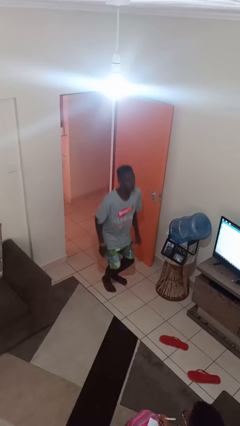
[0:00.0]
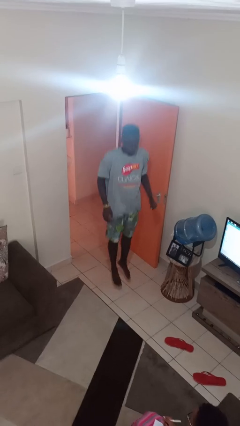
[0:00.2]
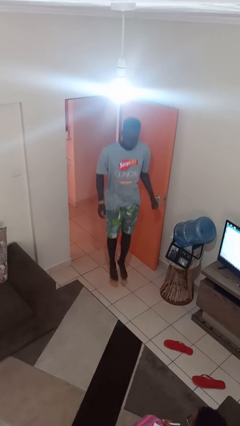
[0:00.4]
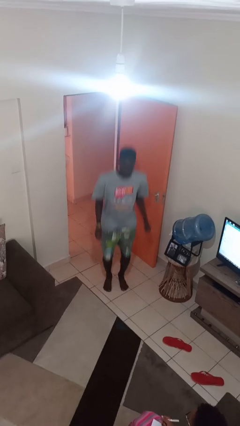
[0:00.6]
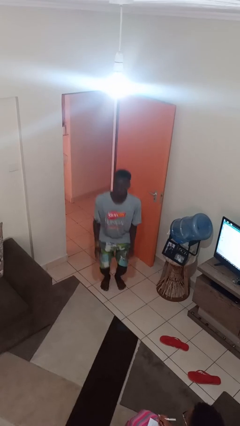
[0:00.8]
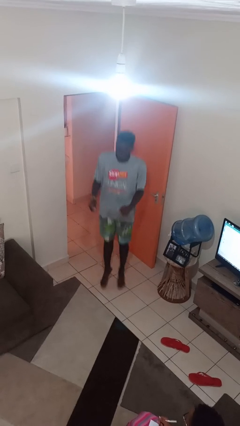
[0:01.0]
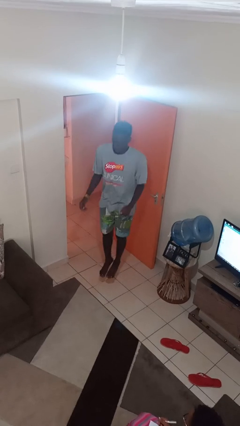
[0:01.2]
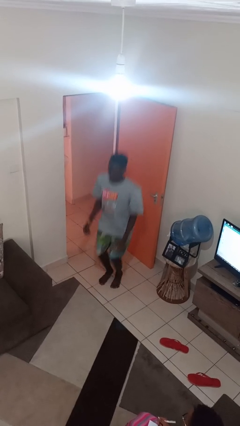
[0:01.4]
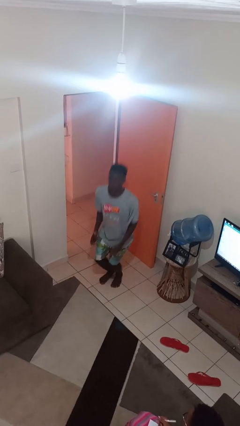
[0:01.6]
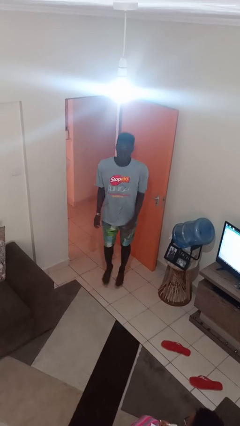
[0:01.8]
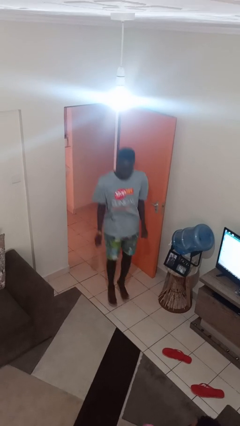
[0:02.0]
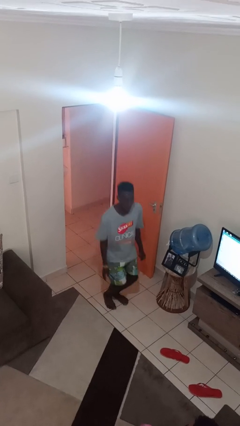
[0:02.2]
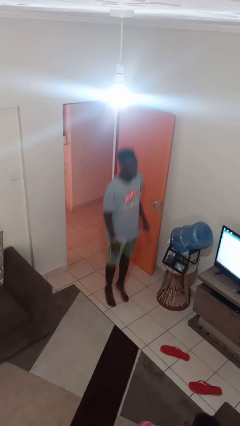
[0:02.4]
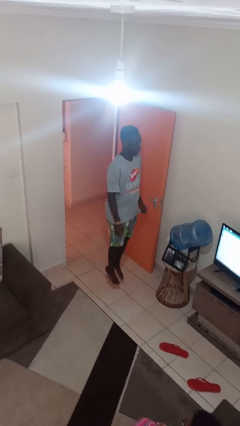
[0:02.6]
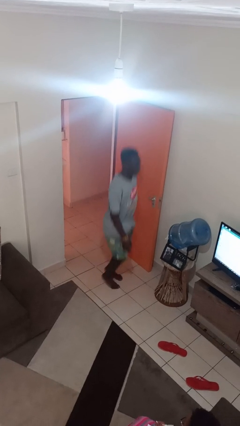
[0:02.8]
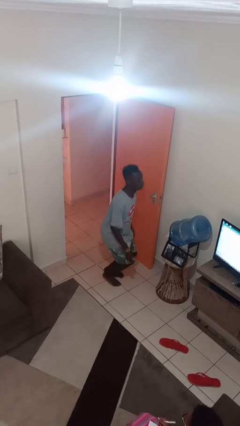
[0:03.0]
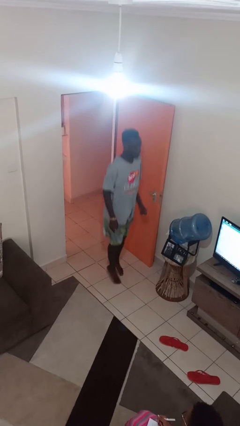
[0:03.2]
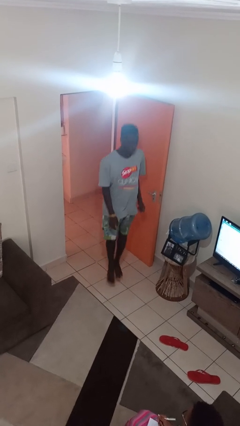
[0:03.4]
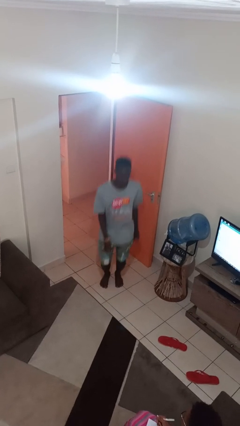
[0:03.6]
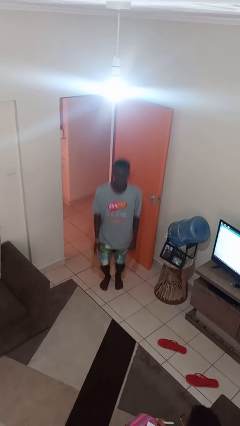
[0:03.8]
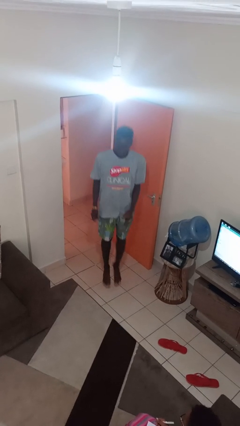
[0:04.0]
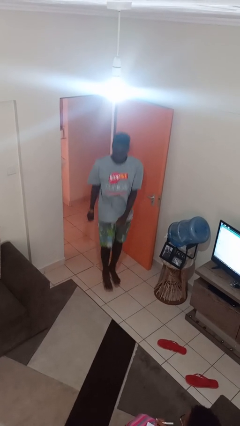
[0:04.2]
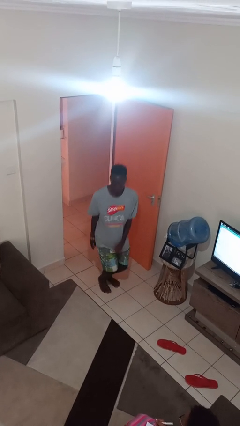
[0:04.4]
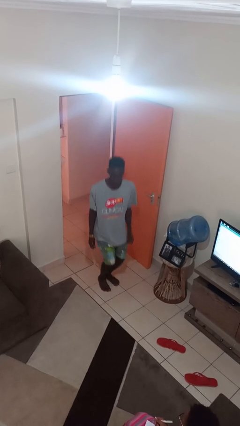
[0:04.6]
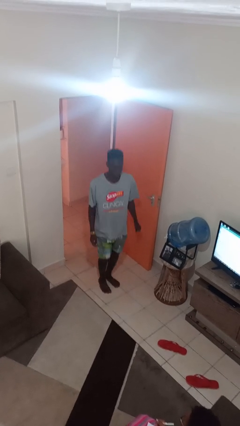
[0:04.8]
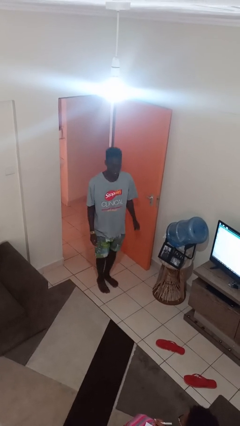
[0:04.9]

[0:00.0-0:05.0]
person jumps

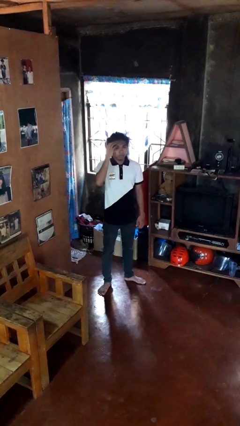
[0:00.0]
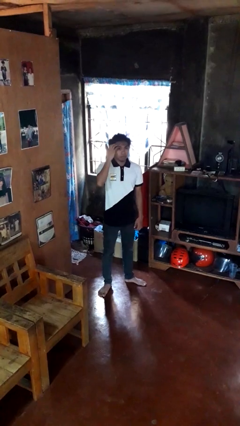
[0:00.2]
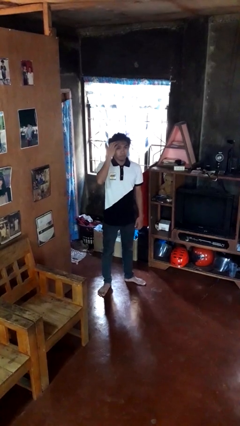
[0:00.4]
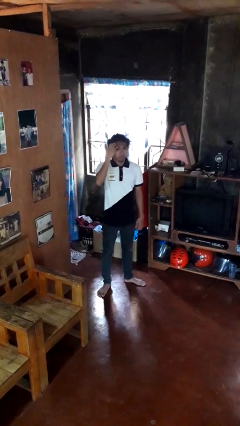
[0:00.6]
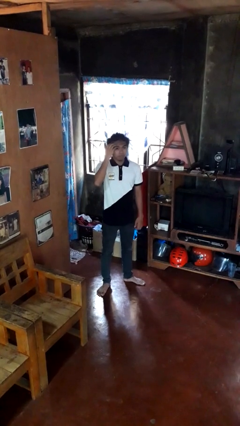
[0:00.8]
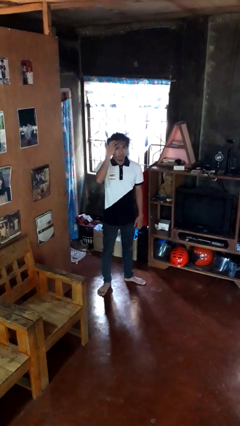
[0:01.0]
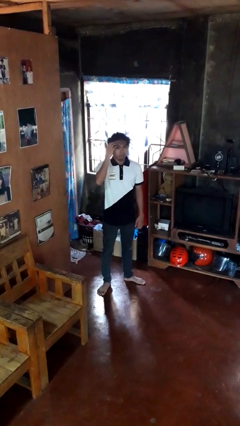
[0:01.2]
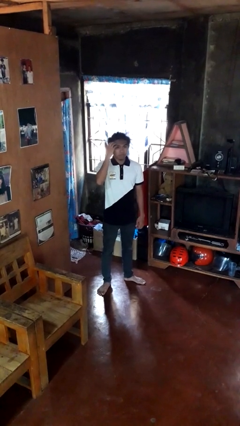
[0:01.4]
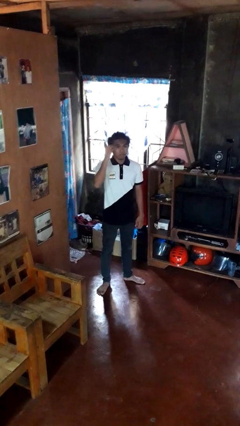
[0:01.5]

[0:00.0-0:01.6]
person scratches face

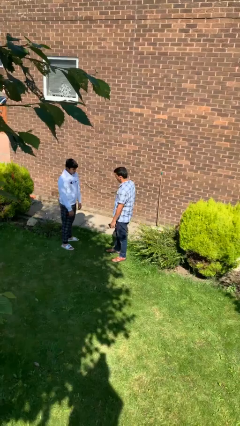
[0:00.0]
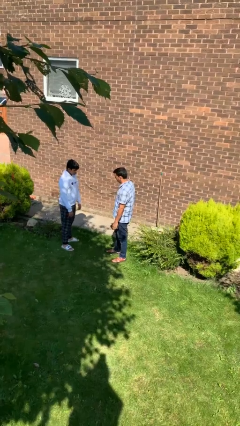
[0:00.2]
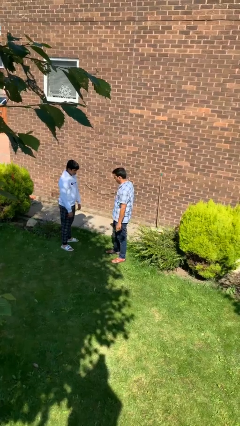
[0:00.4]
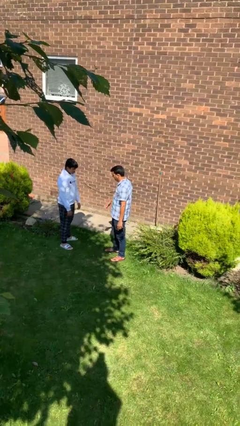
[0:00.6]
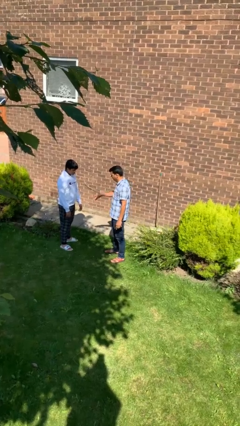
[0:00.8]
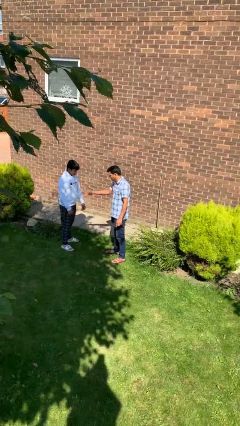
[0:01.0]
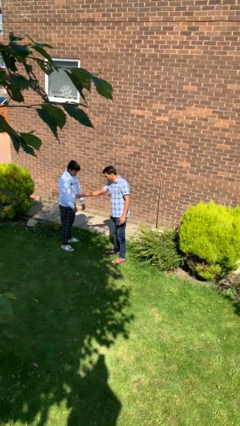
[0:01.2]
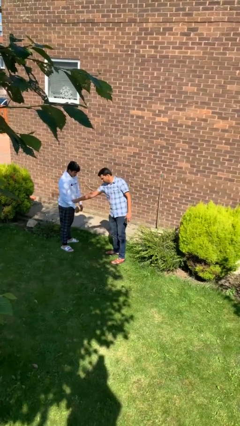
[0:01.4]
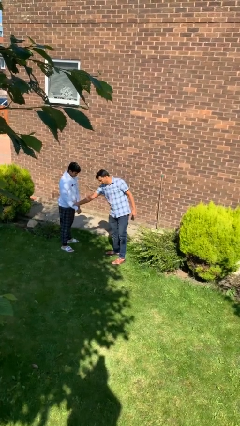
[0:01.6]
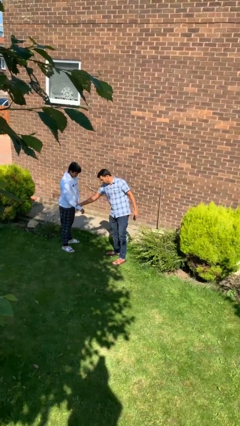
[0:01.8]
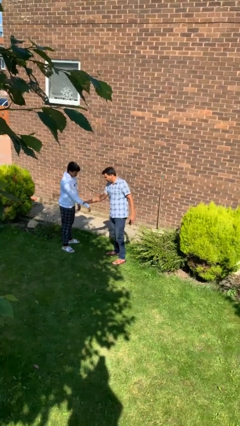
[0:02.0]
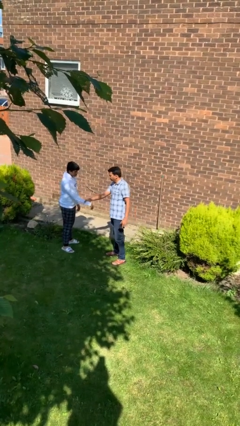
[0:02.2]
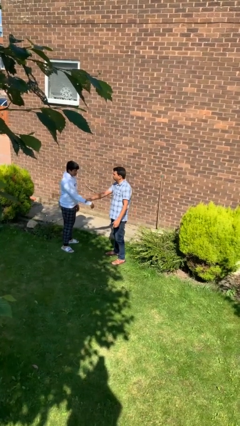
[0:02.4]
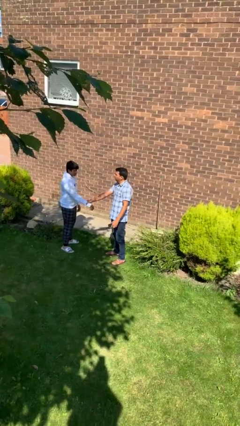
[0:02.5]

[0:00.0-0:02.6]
person grabs person by forearm

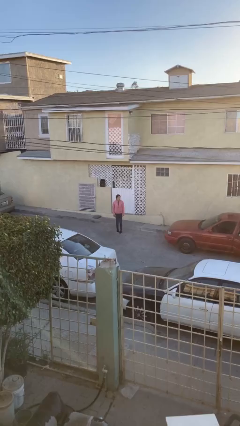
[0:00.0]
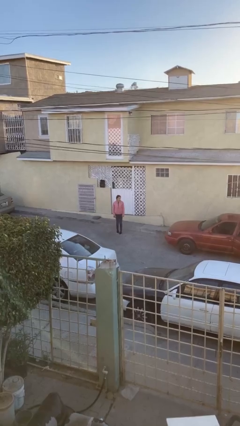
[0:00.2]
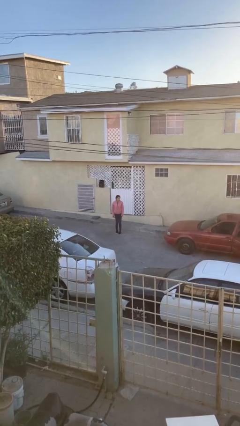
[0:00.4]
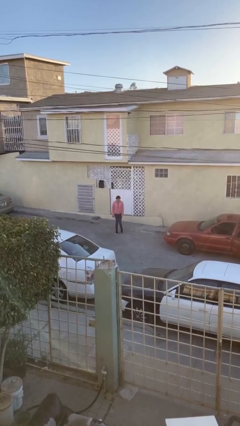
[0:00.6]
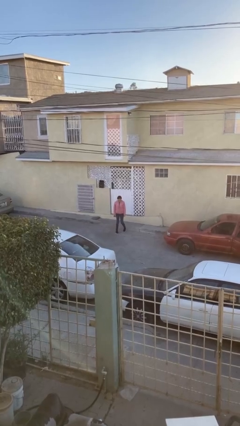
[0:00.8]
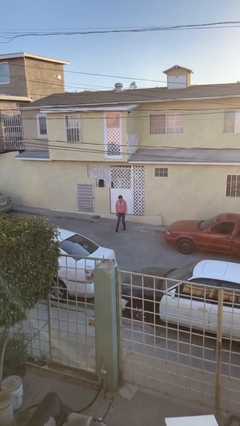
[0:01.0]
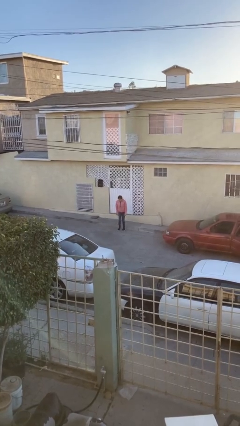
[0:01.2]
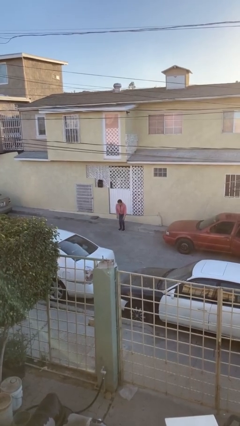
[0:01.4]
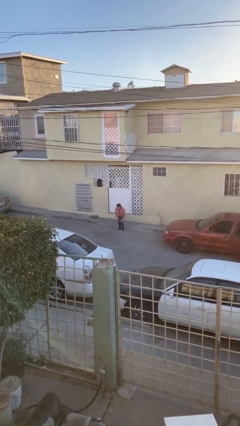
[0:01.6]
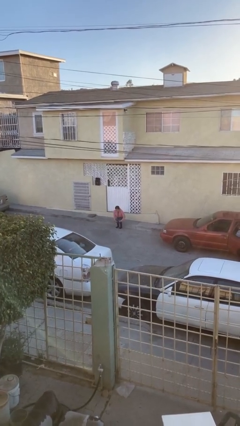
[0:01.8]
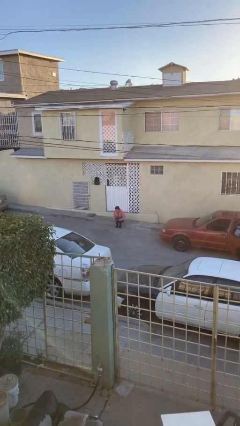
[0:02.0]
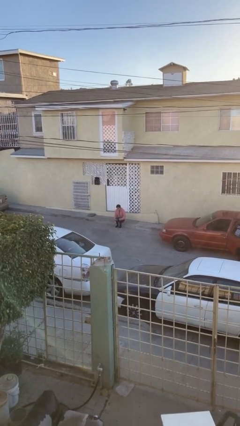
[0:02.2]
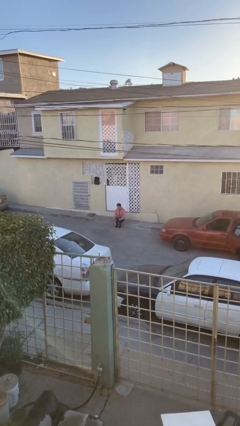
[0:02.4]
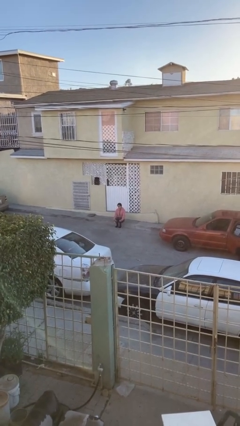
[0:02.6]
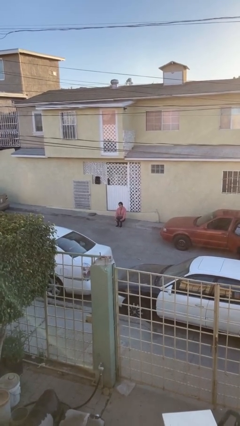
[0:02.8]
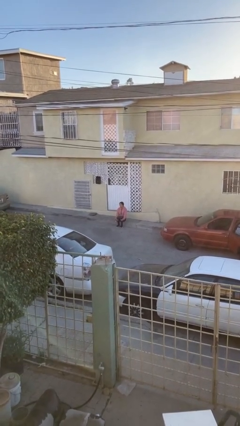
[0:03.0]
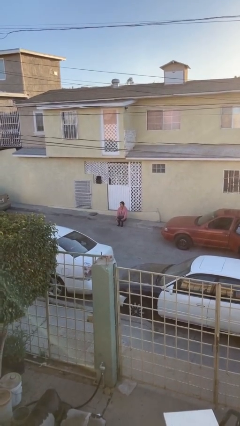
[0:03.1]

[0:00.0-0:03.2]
person sits down

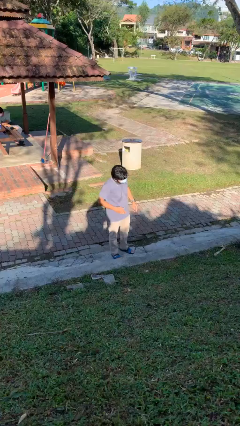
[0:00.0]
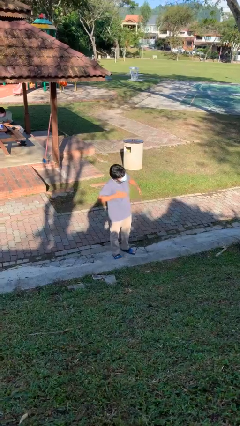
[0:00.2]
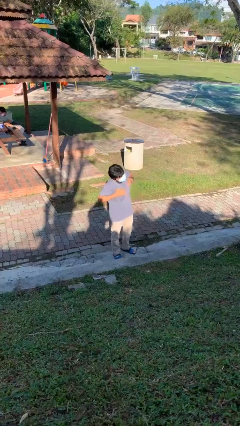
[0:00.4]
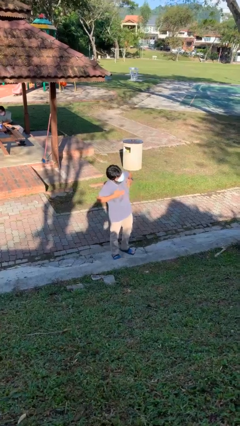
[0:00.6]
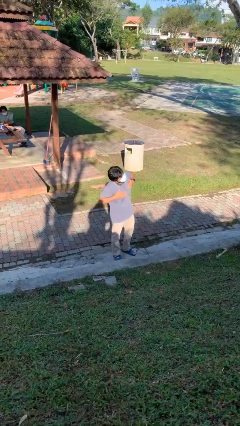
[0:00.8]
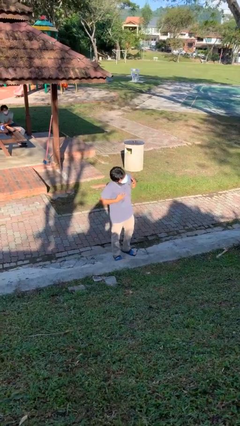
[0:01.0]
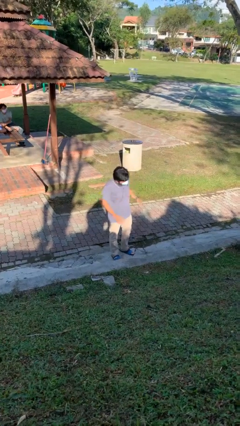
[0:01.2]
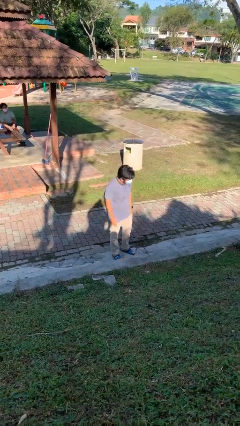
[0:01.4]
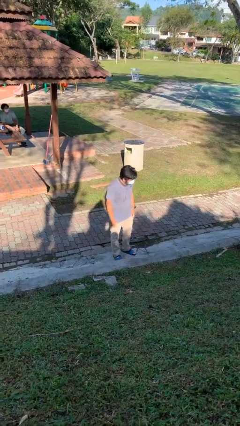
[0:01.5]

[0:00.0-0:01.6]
person drums on chest

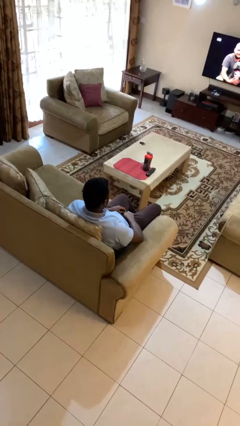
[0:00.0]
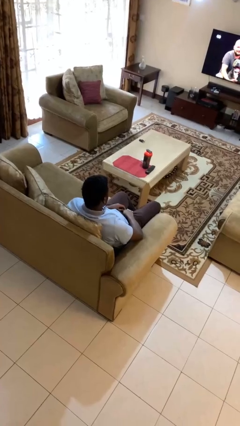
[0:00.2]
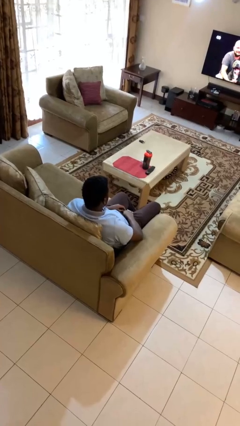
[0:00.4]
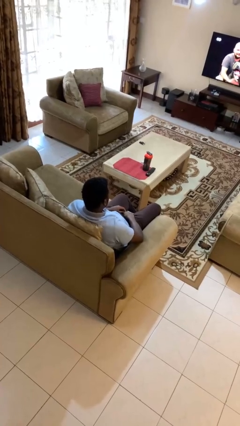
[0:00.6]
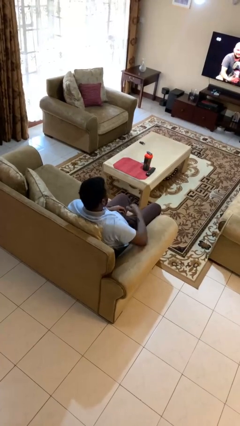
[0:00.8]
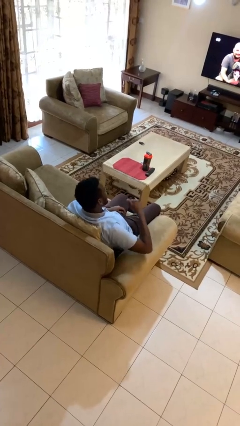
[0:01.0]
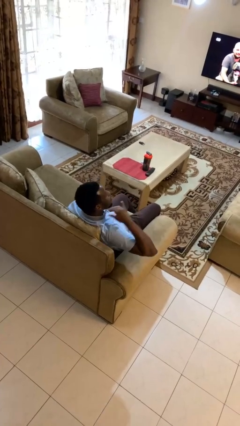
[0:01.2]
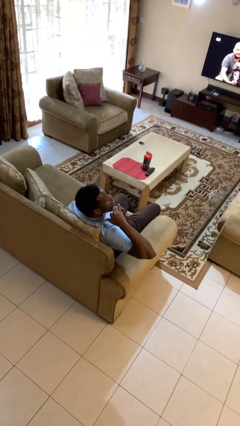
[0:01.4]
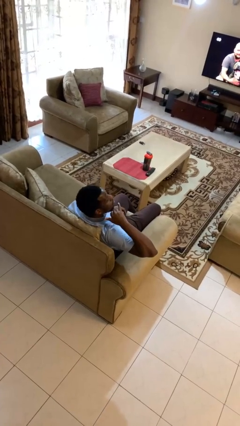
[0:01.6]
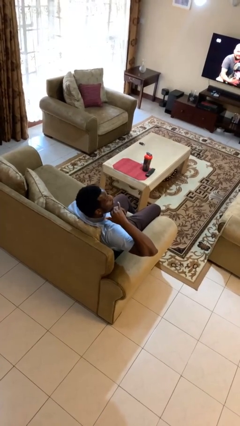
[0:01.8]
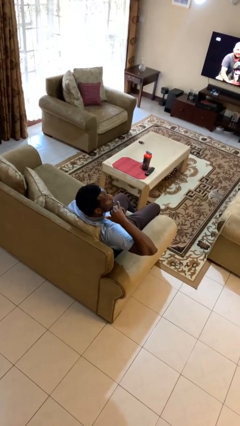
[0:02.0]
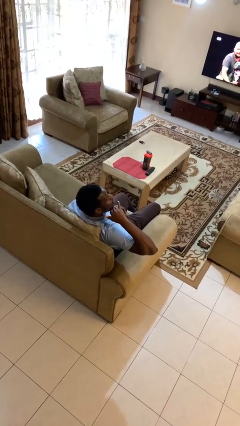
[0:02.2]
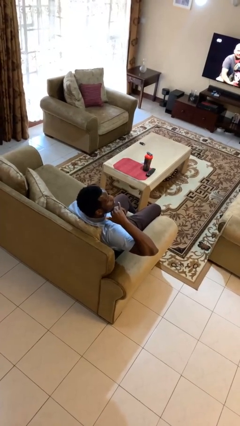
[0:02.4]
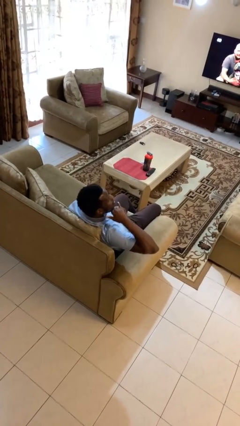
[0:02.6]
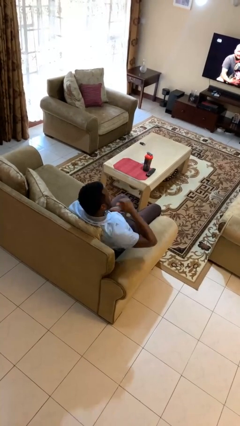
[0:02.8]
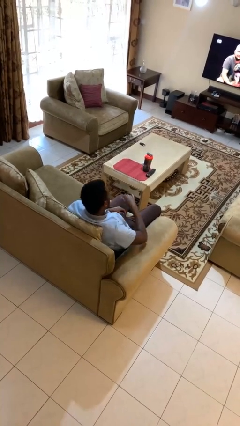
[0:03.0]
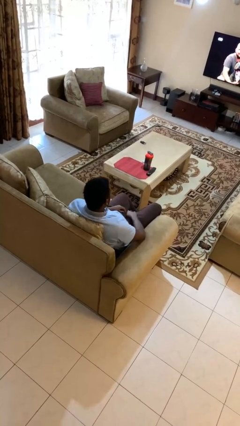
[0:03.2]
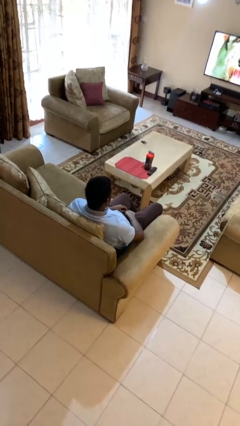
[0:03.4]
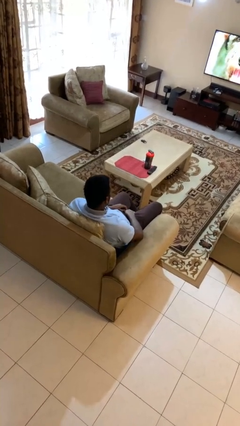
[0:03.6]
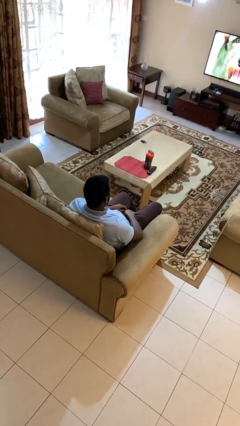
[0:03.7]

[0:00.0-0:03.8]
person gestures call me
